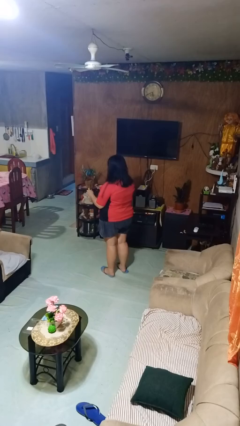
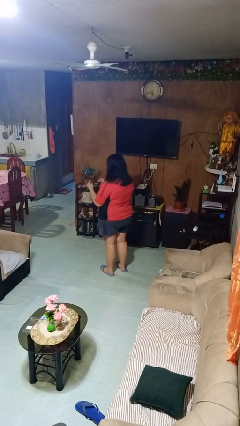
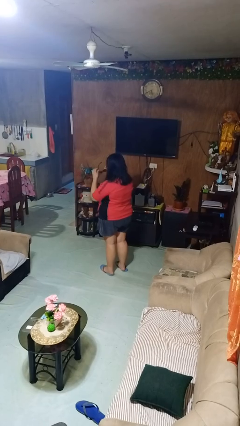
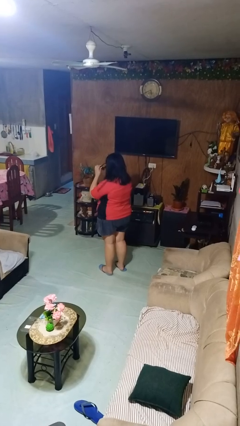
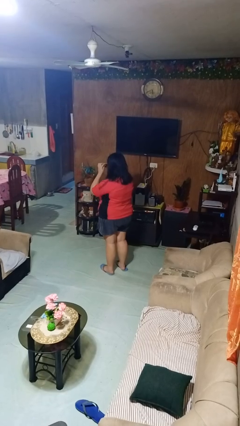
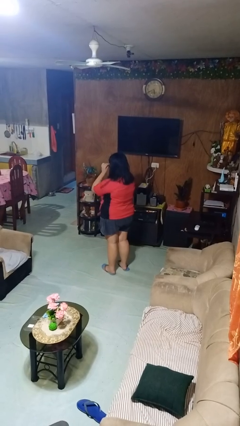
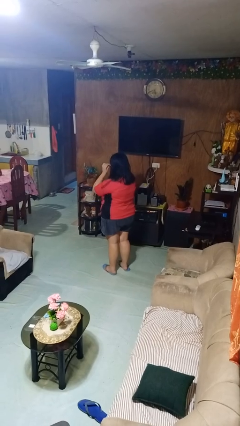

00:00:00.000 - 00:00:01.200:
person puts on sunglasses

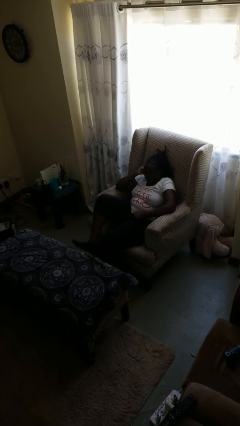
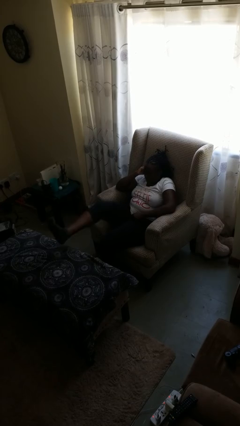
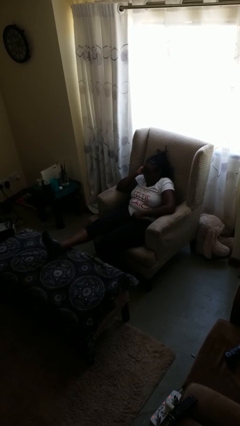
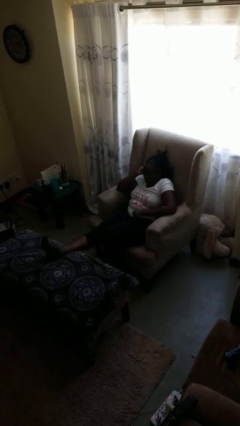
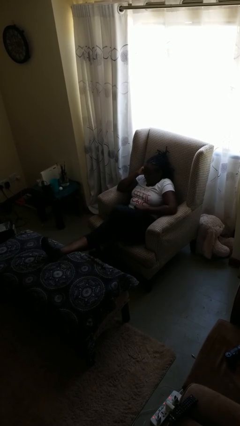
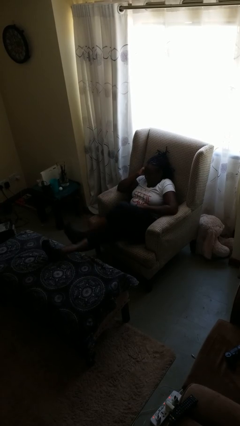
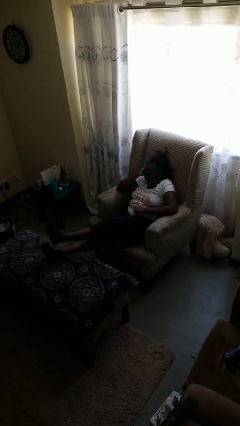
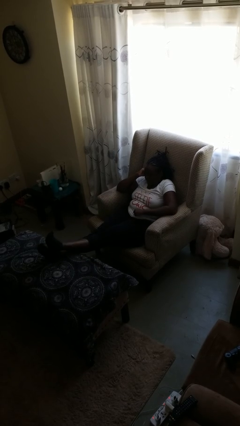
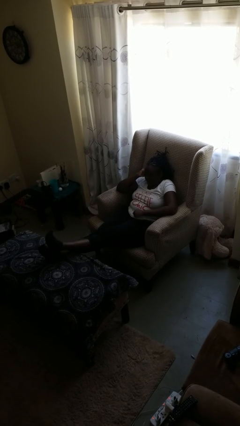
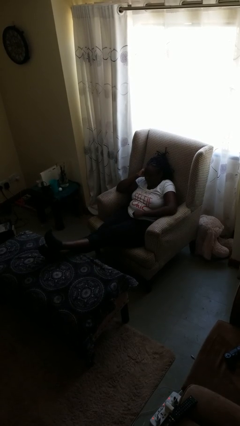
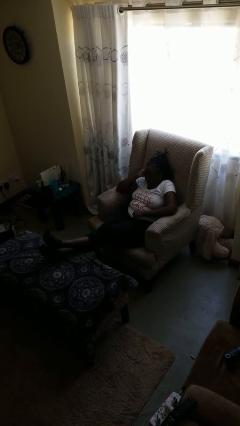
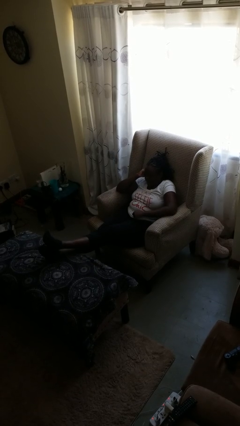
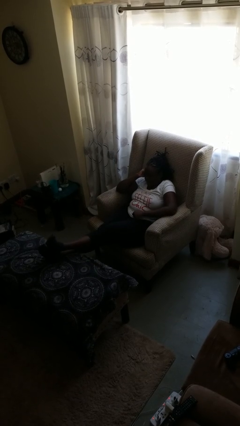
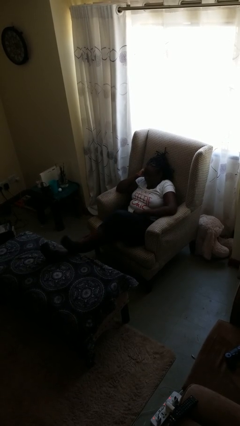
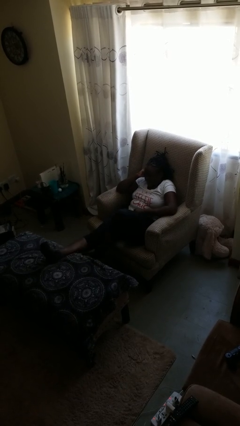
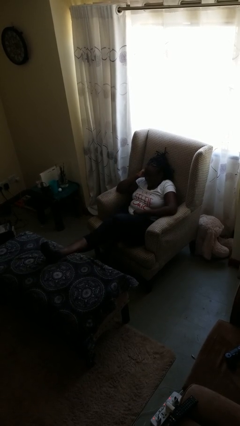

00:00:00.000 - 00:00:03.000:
person puts feet up

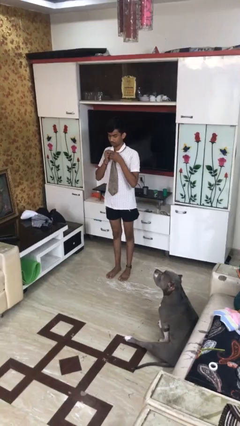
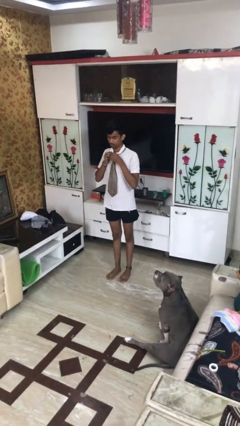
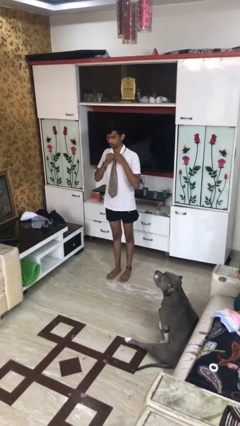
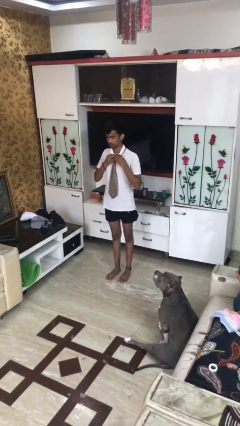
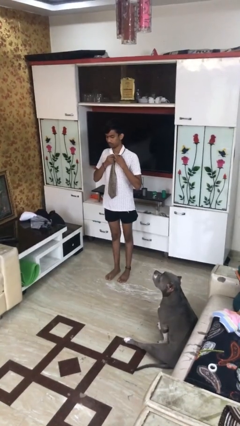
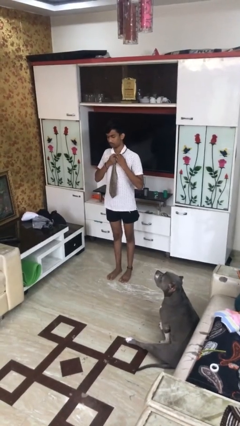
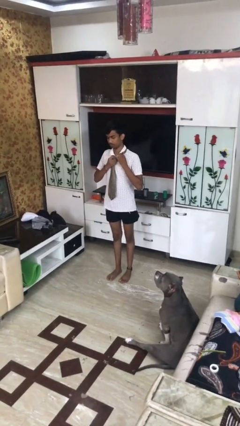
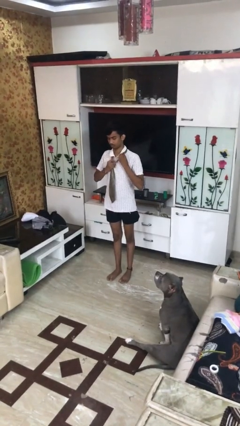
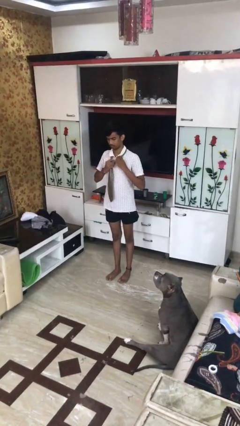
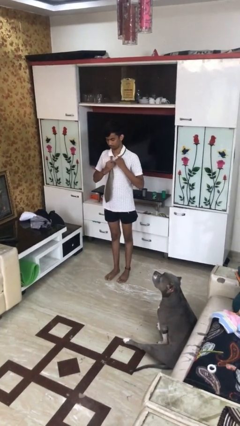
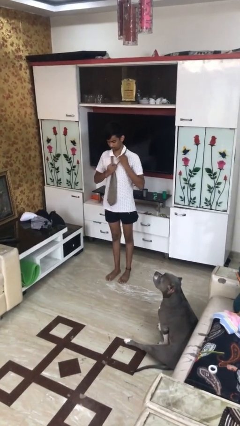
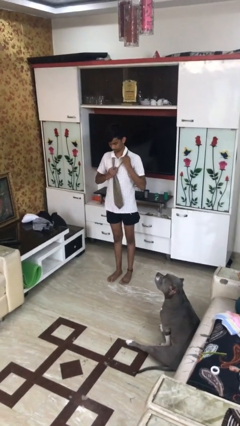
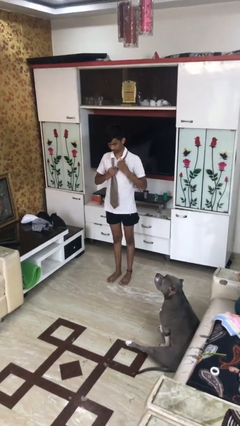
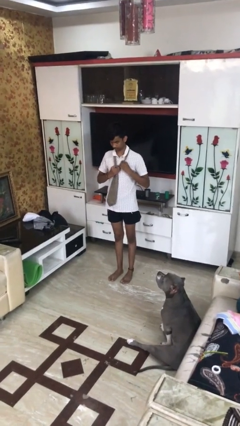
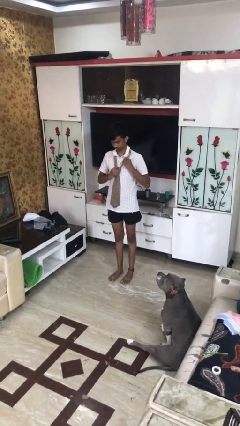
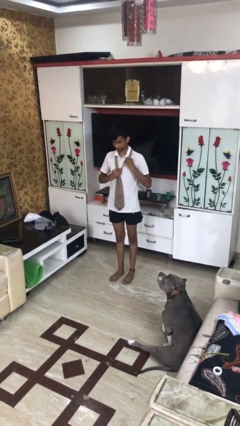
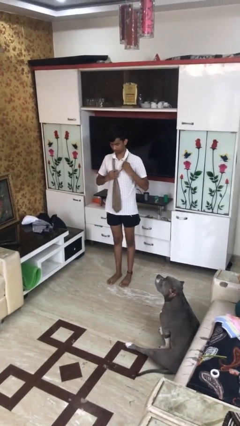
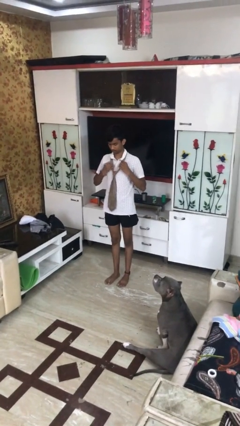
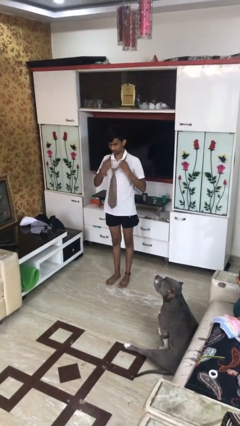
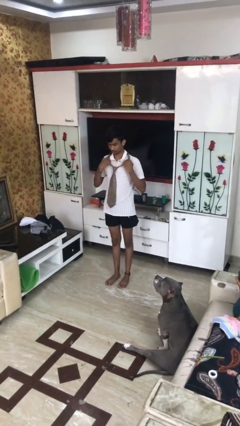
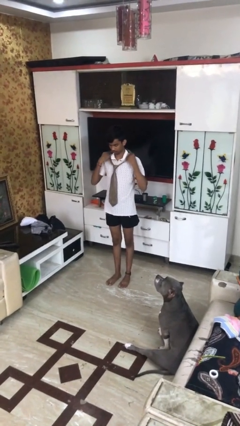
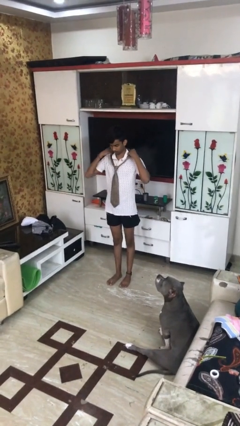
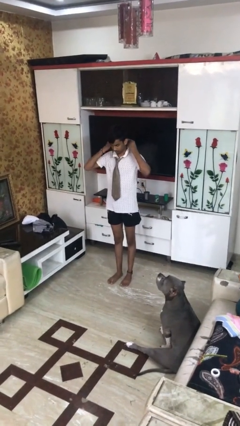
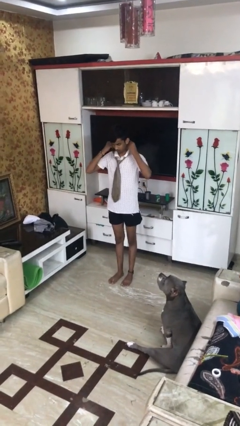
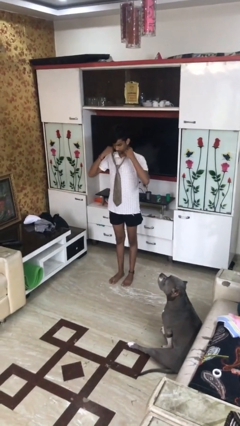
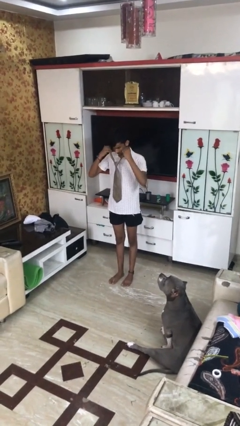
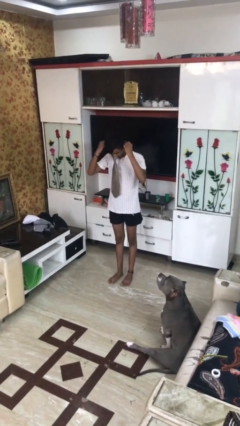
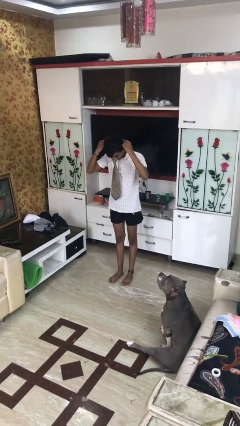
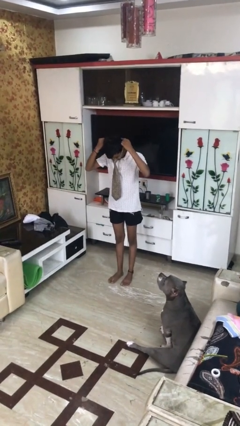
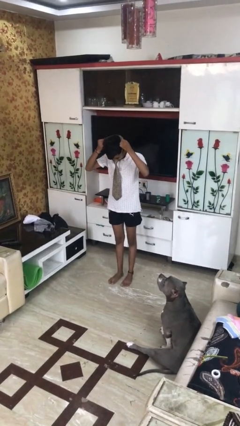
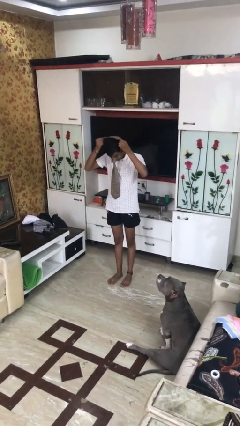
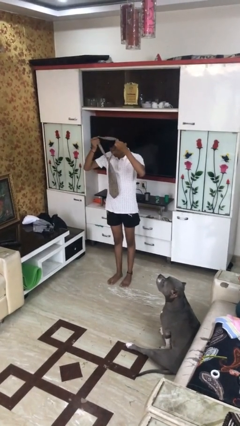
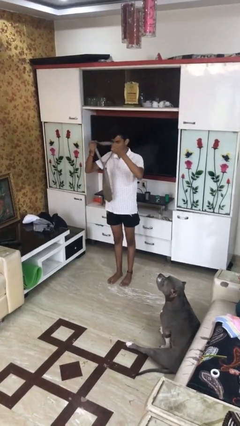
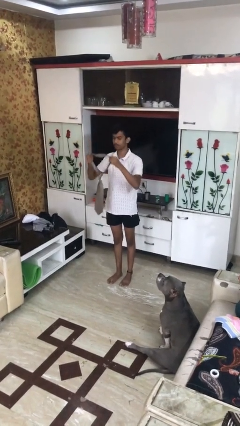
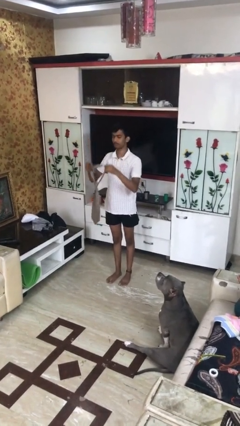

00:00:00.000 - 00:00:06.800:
person takes off necktie

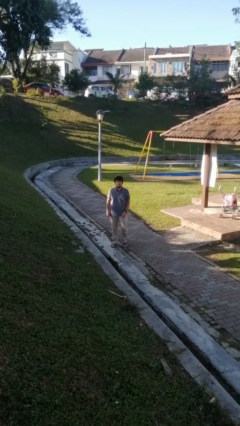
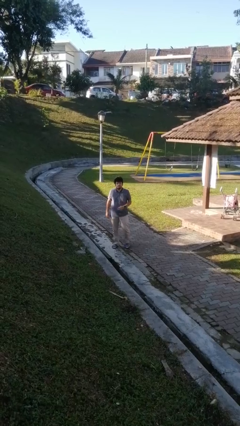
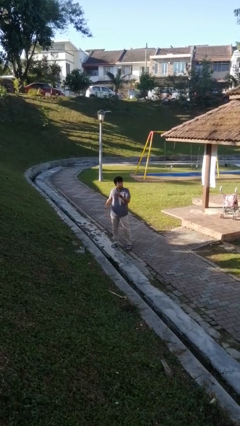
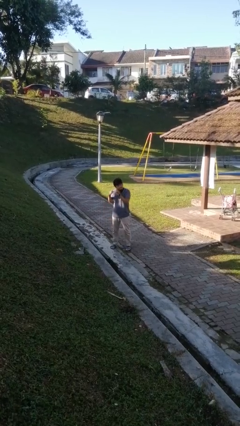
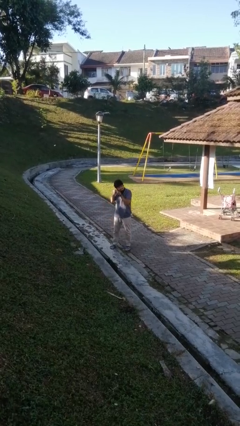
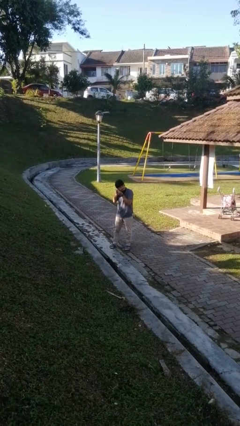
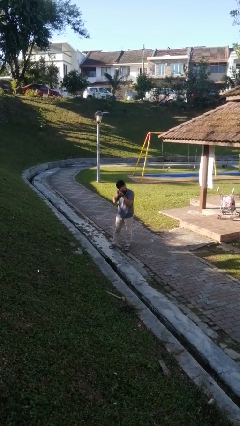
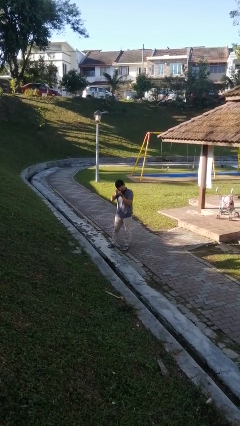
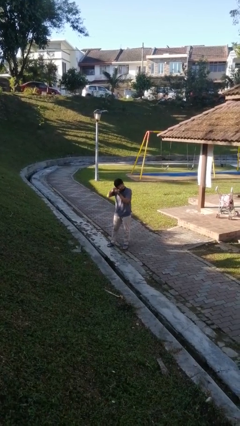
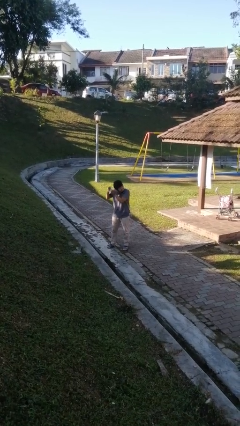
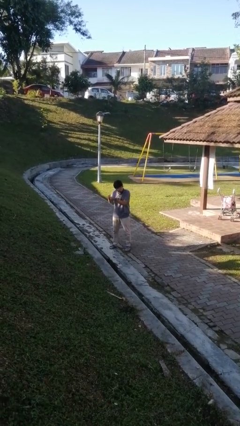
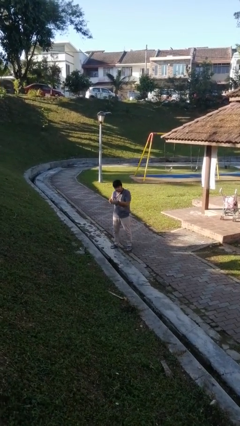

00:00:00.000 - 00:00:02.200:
person takes off earrings

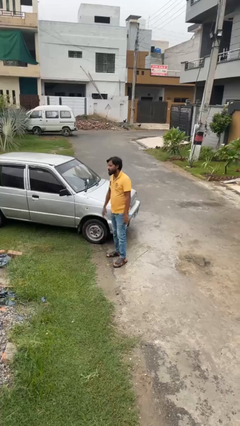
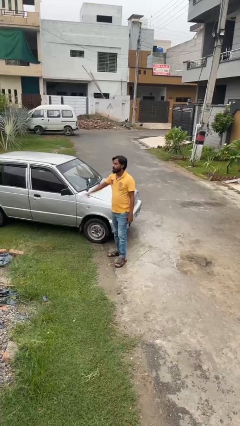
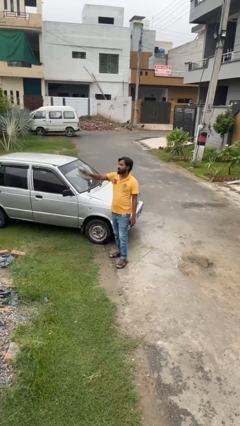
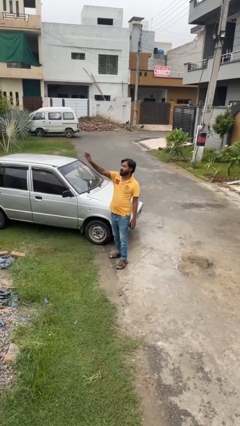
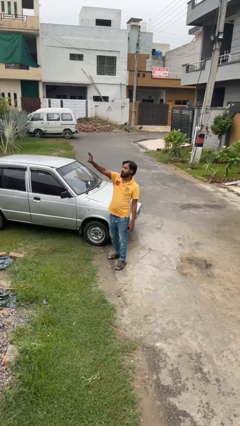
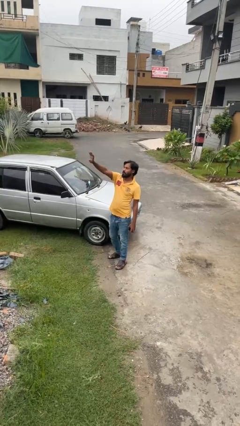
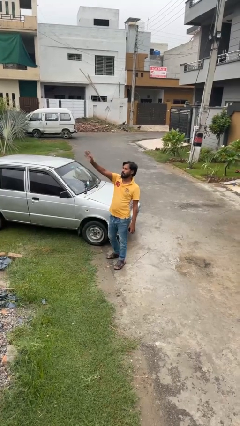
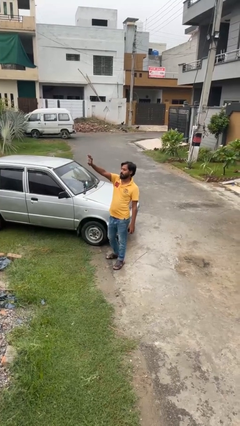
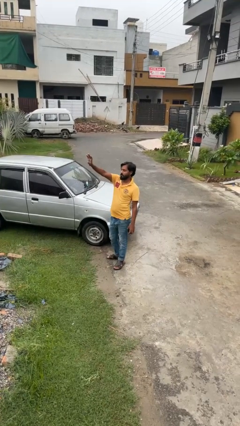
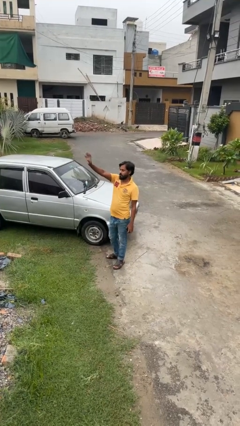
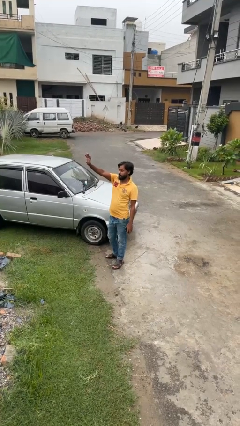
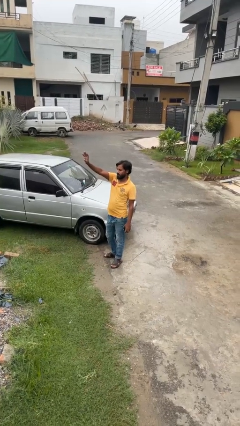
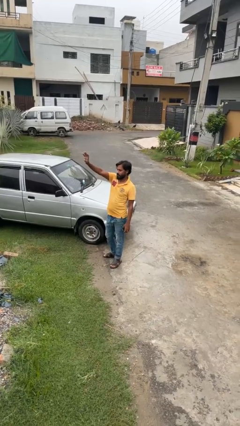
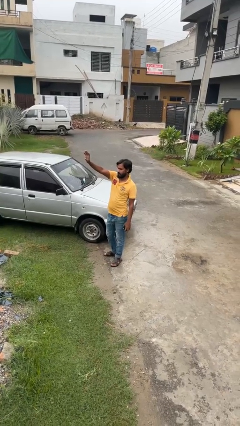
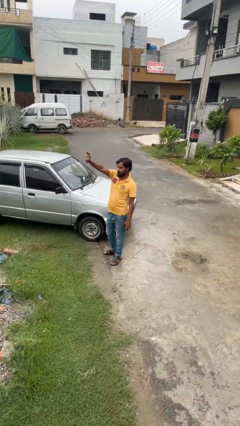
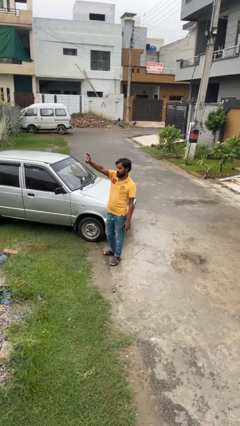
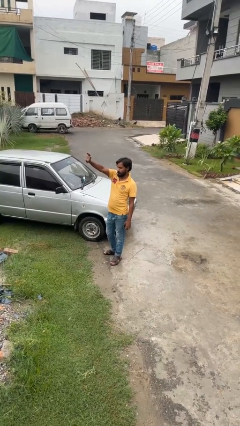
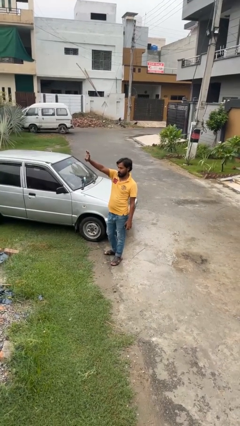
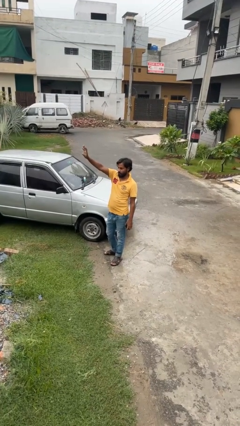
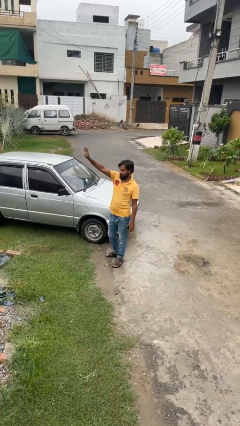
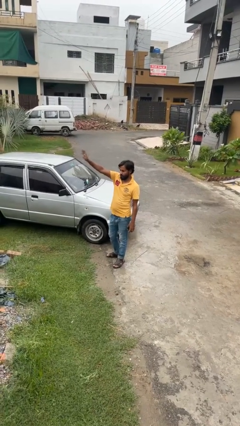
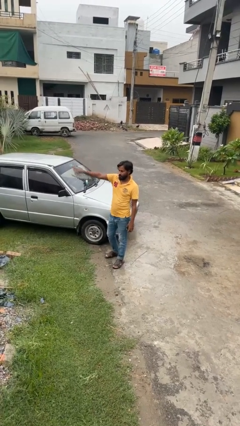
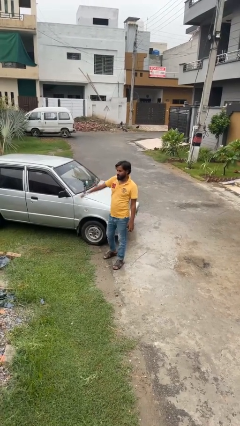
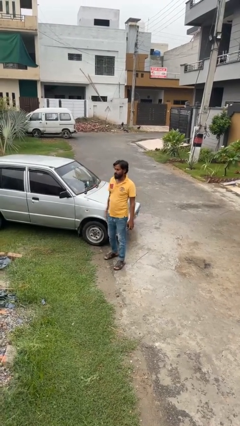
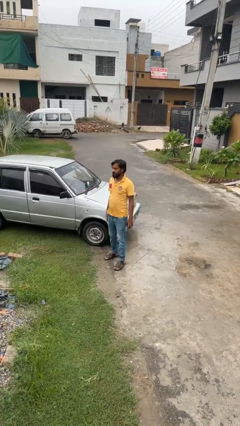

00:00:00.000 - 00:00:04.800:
person waves at person
